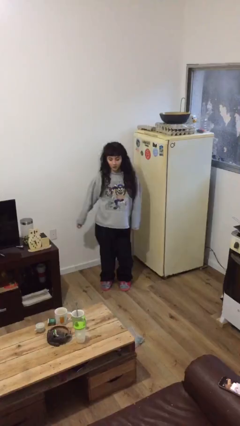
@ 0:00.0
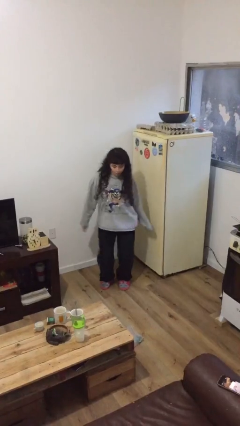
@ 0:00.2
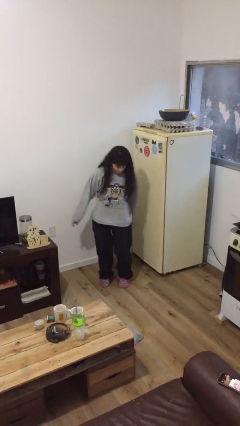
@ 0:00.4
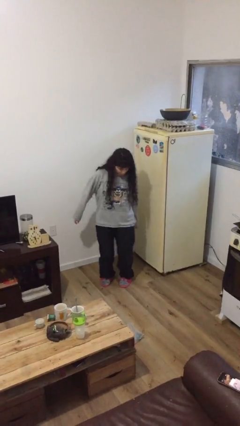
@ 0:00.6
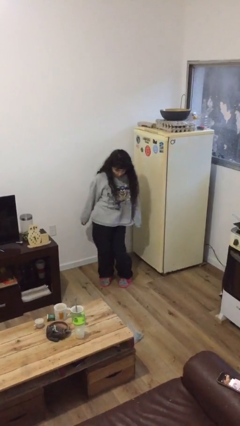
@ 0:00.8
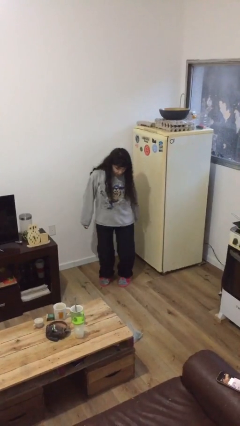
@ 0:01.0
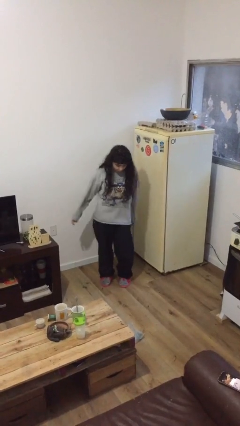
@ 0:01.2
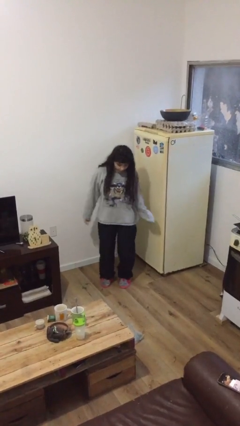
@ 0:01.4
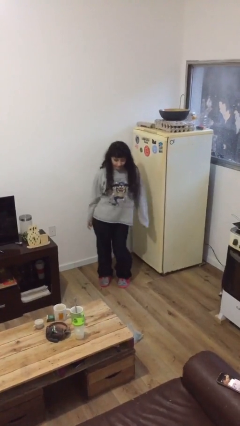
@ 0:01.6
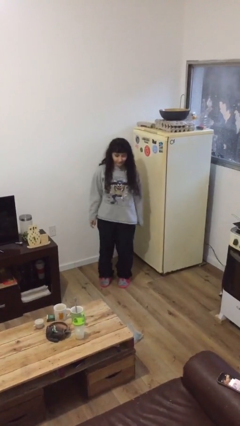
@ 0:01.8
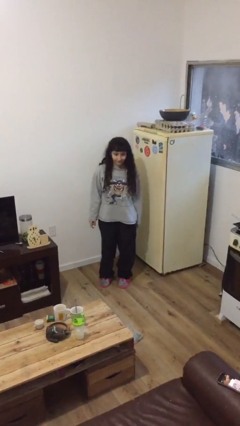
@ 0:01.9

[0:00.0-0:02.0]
person wiggles hips

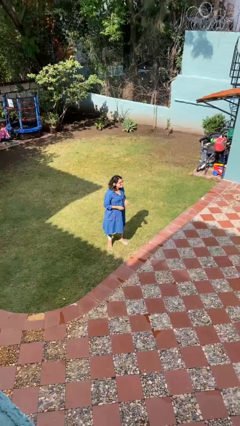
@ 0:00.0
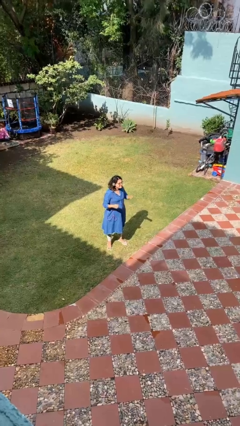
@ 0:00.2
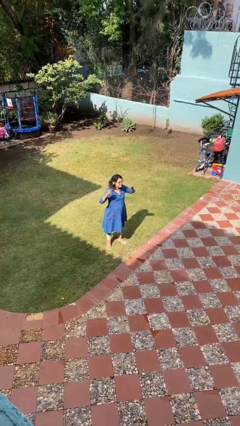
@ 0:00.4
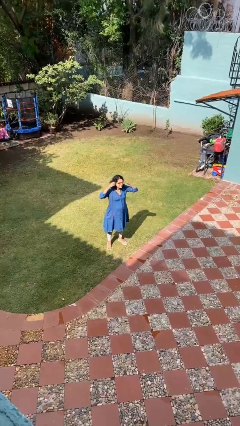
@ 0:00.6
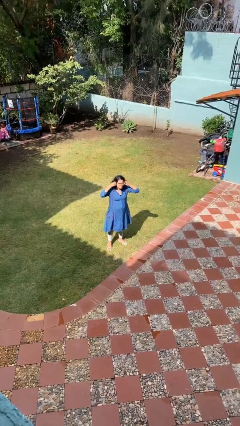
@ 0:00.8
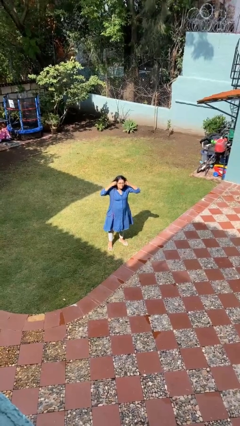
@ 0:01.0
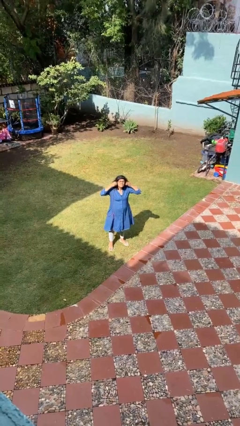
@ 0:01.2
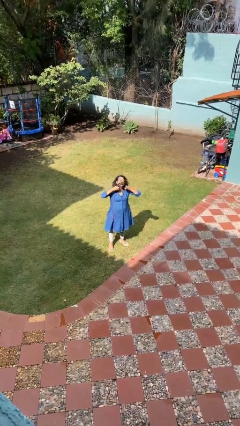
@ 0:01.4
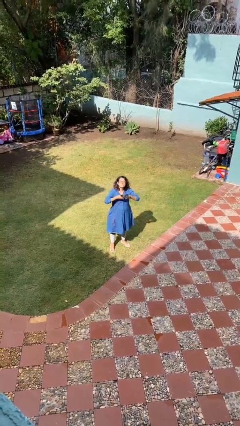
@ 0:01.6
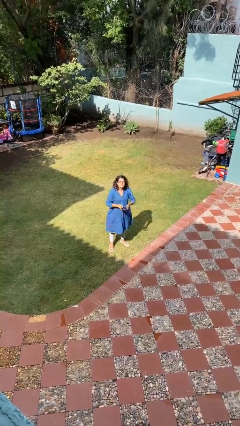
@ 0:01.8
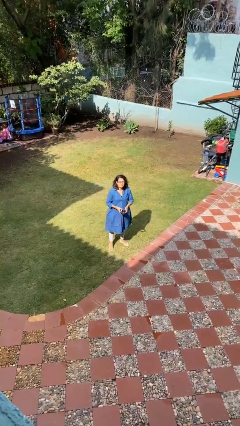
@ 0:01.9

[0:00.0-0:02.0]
person takes off headphones

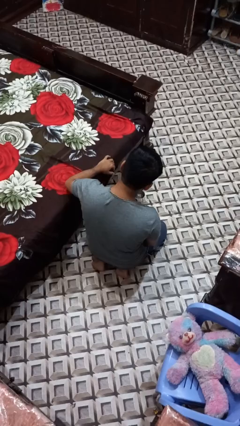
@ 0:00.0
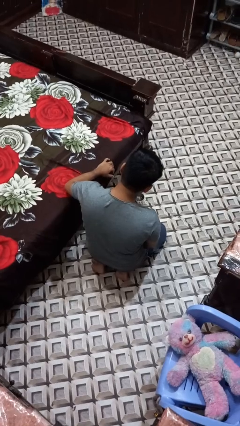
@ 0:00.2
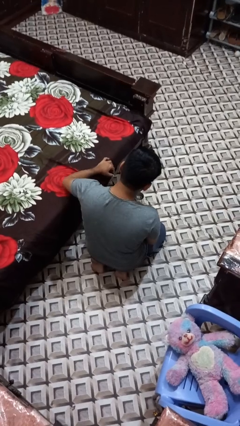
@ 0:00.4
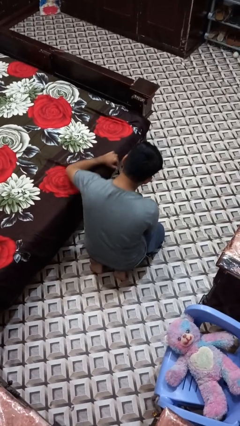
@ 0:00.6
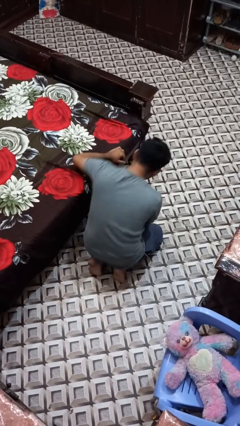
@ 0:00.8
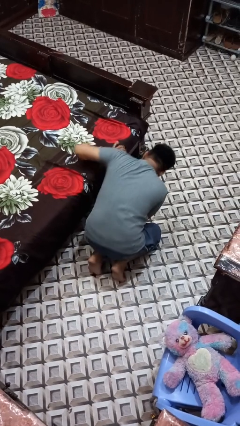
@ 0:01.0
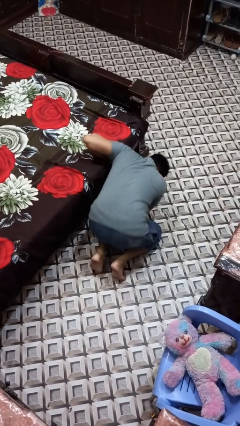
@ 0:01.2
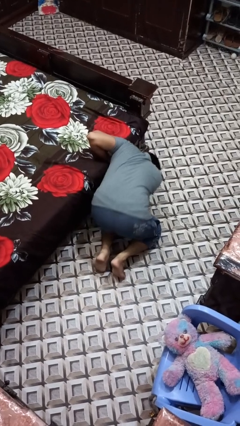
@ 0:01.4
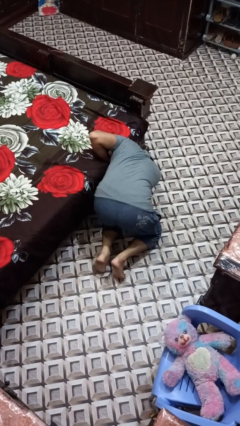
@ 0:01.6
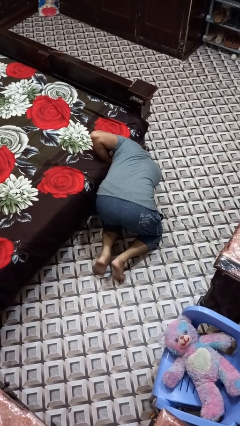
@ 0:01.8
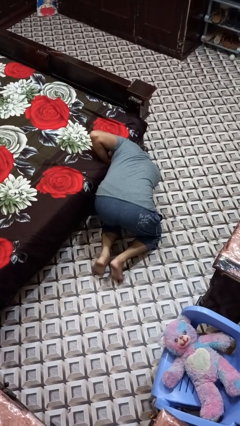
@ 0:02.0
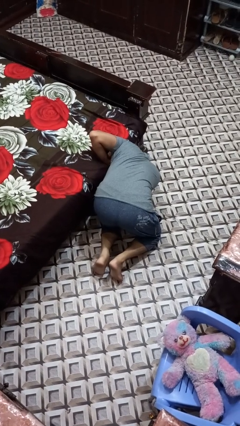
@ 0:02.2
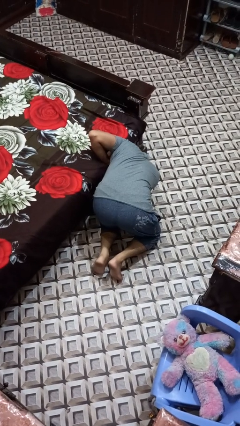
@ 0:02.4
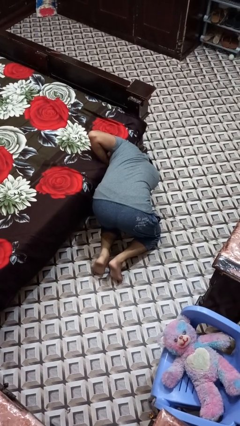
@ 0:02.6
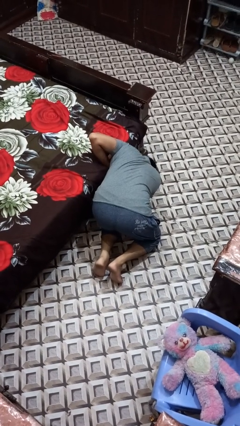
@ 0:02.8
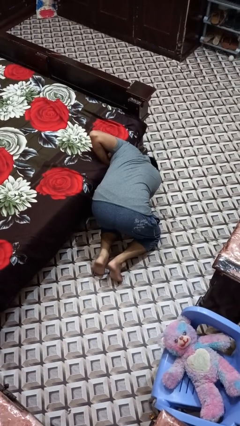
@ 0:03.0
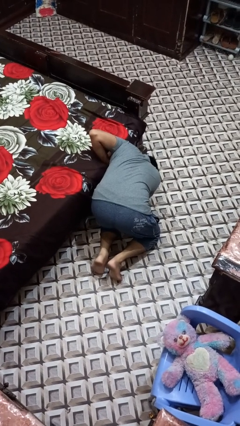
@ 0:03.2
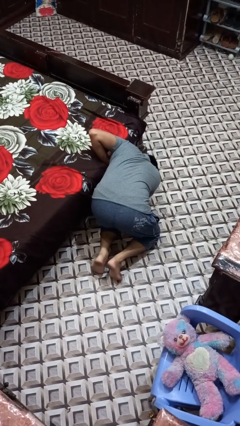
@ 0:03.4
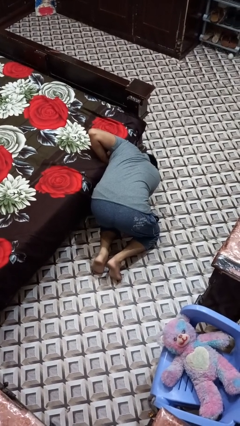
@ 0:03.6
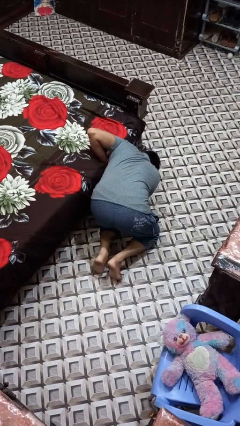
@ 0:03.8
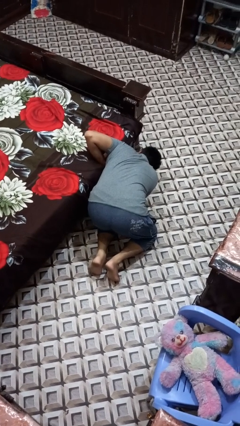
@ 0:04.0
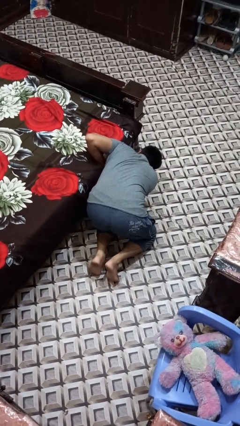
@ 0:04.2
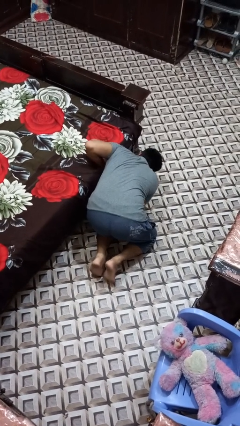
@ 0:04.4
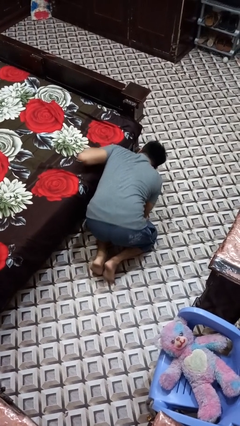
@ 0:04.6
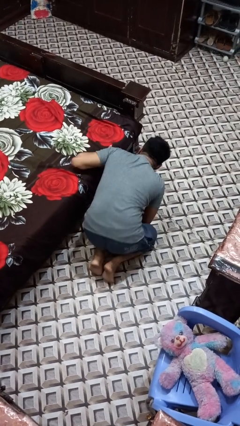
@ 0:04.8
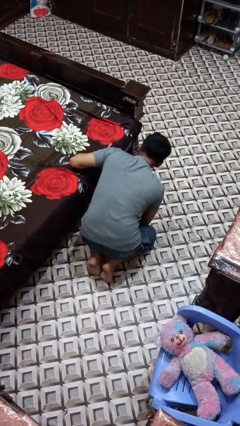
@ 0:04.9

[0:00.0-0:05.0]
person searches under bed

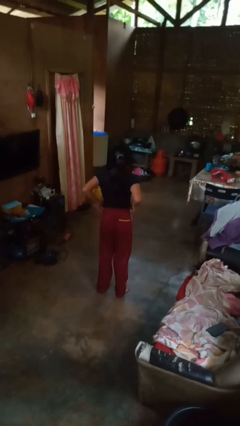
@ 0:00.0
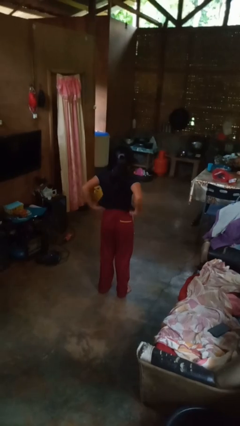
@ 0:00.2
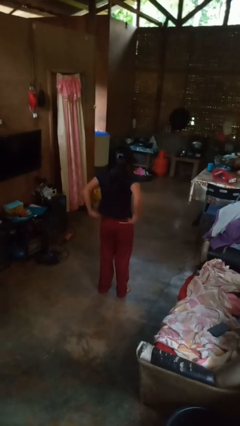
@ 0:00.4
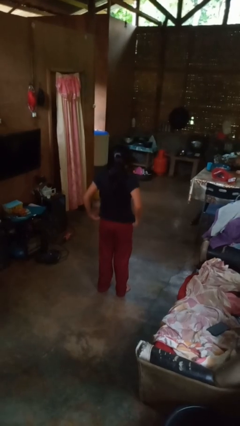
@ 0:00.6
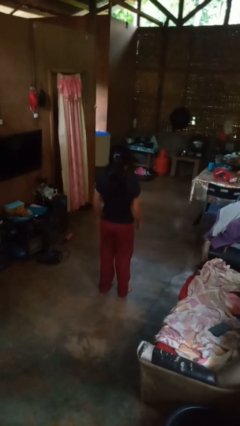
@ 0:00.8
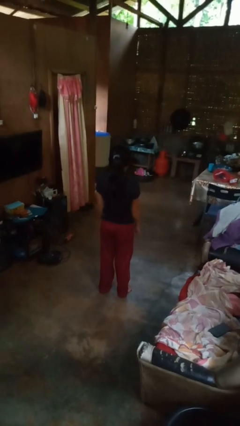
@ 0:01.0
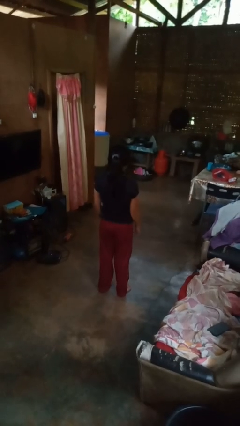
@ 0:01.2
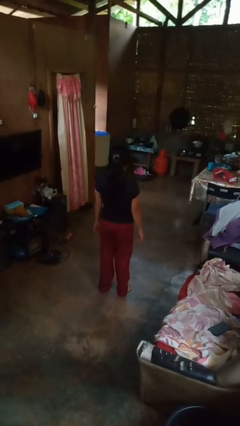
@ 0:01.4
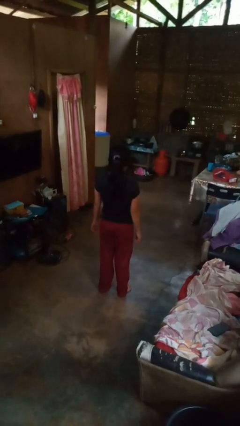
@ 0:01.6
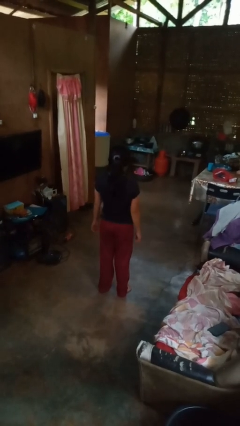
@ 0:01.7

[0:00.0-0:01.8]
person untucks shirt

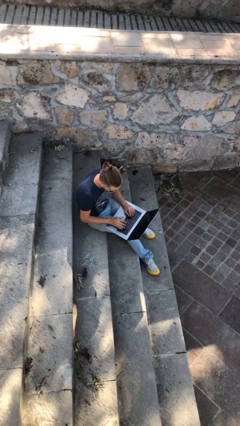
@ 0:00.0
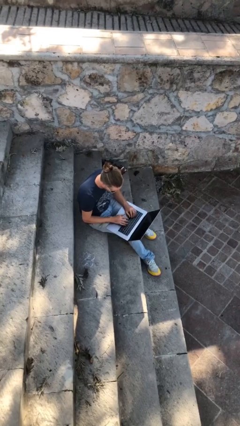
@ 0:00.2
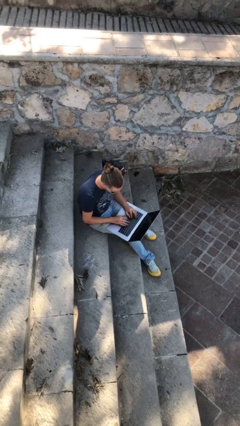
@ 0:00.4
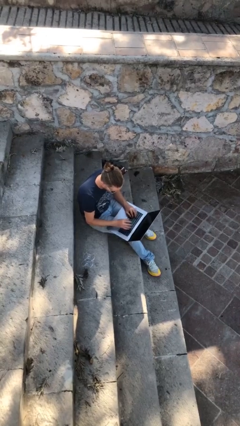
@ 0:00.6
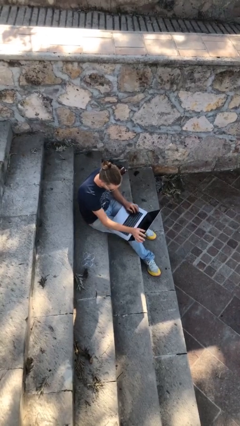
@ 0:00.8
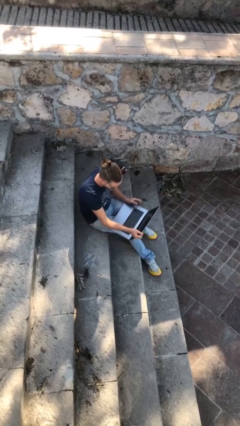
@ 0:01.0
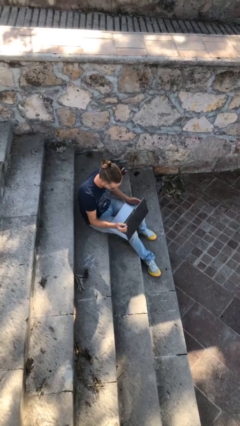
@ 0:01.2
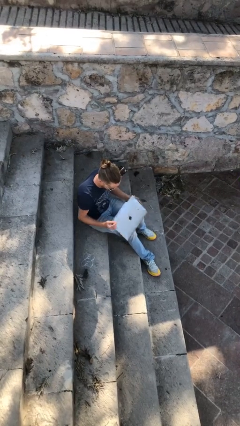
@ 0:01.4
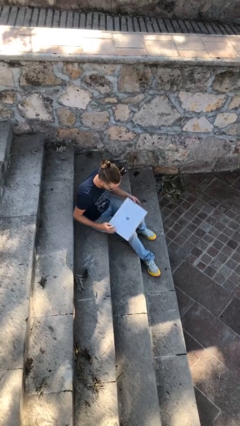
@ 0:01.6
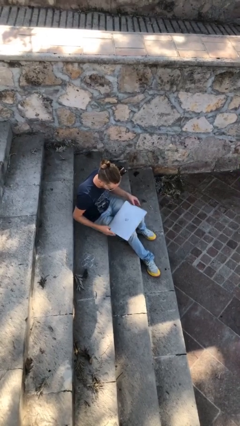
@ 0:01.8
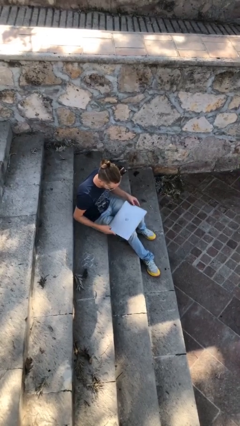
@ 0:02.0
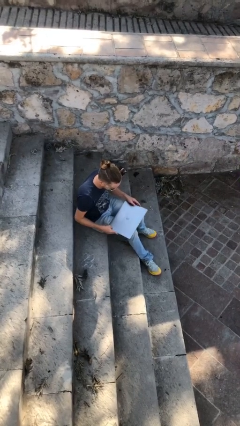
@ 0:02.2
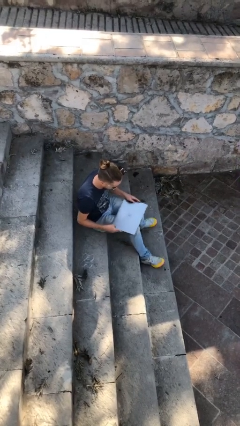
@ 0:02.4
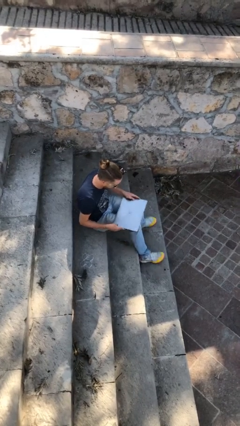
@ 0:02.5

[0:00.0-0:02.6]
person interacts with laptop

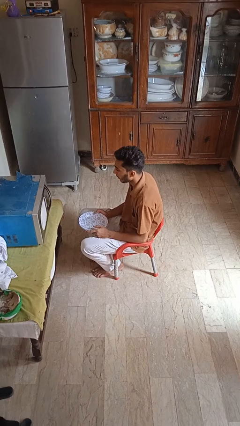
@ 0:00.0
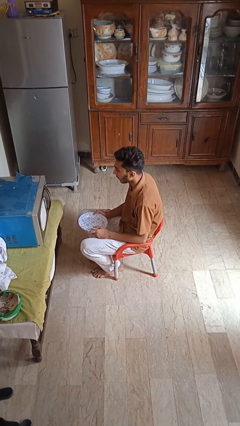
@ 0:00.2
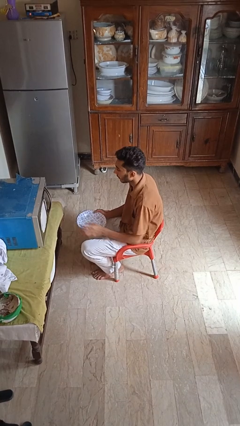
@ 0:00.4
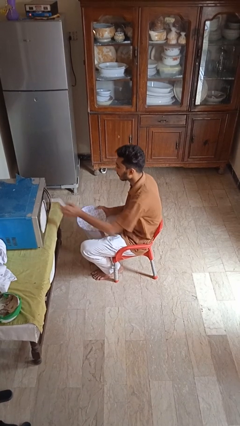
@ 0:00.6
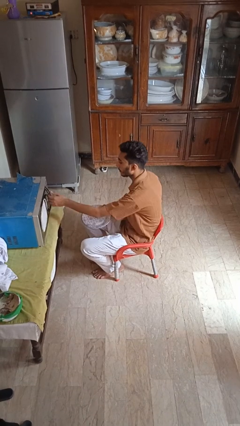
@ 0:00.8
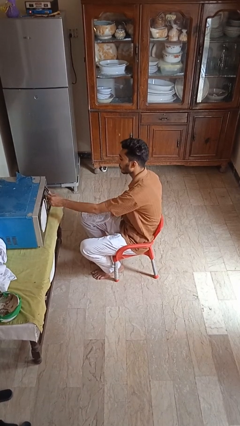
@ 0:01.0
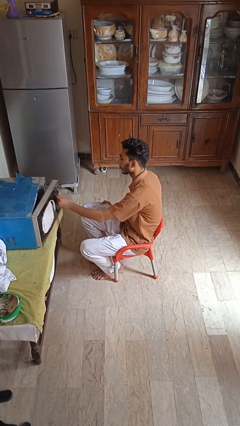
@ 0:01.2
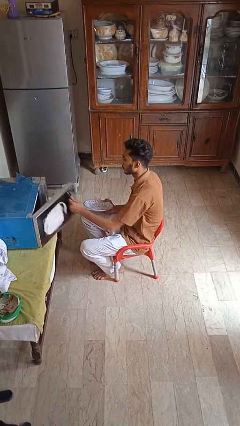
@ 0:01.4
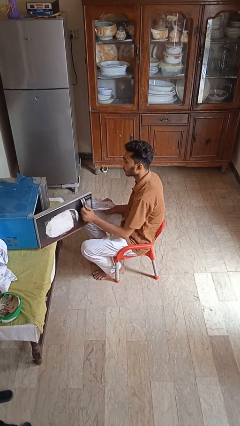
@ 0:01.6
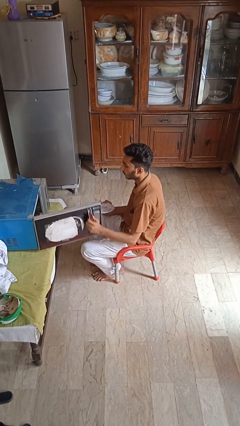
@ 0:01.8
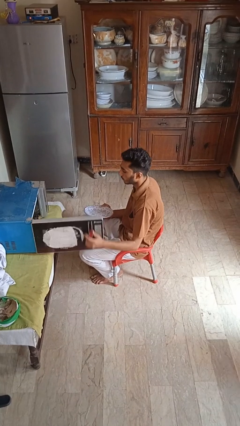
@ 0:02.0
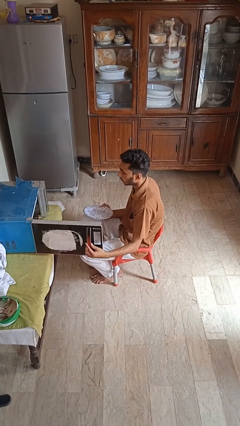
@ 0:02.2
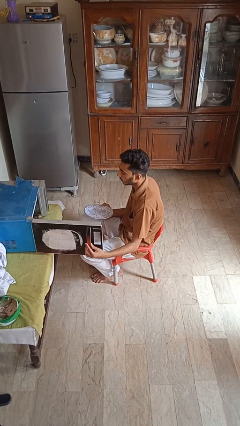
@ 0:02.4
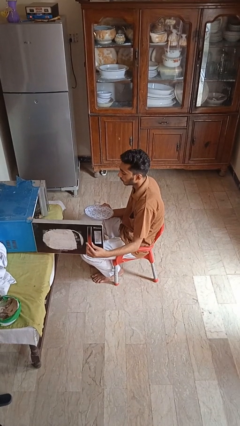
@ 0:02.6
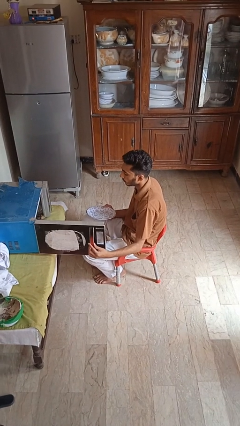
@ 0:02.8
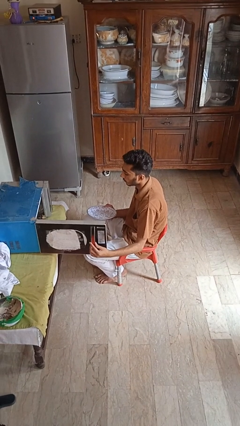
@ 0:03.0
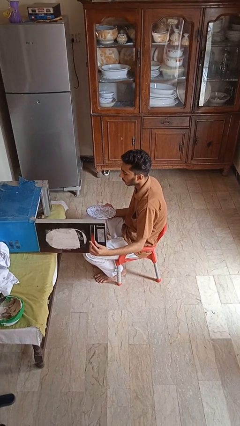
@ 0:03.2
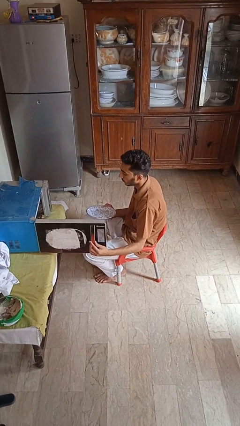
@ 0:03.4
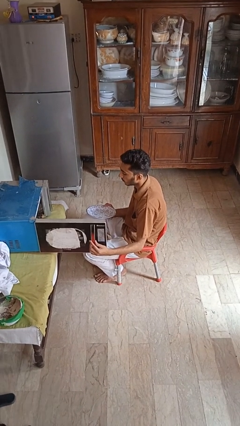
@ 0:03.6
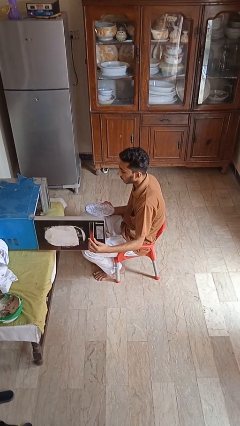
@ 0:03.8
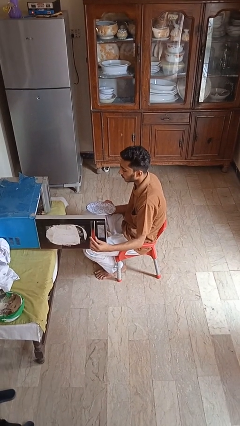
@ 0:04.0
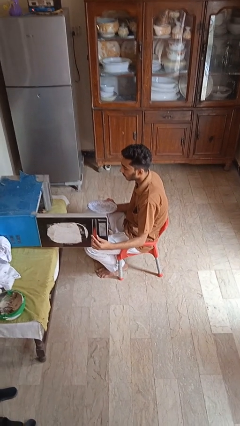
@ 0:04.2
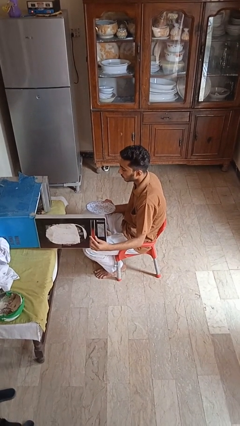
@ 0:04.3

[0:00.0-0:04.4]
person opens microwave
